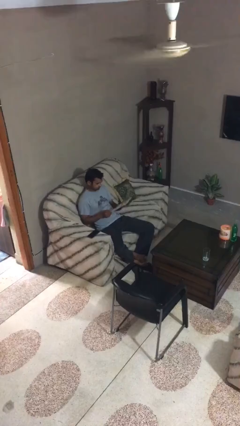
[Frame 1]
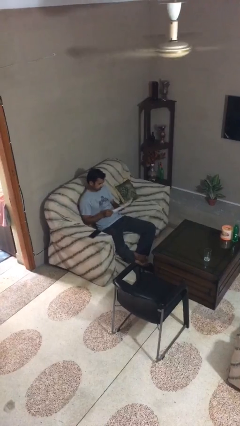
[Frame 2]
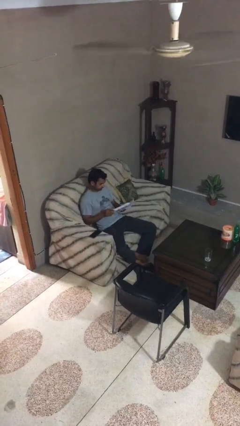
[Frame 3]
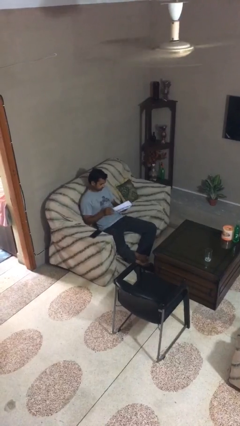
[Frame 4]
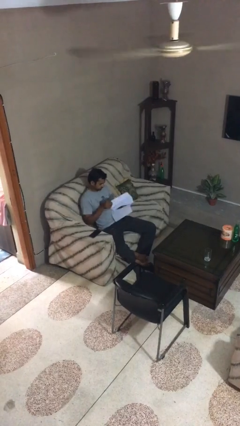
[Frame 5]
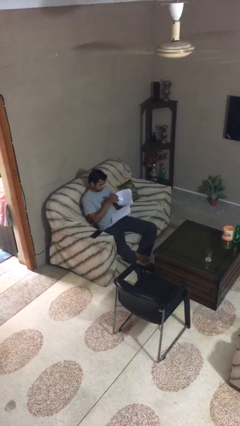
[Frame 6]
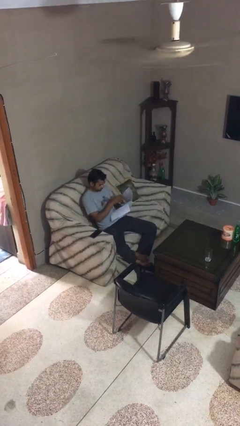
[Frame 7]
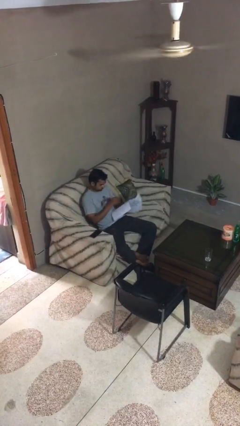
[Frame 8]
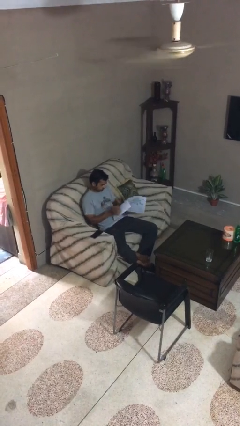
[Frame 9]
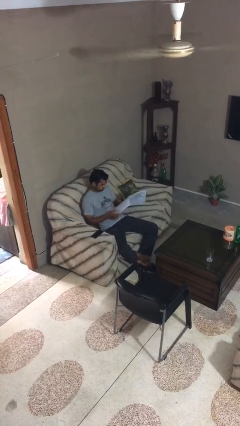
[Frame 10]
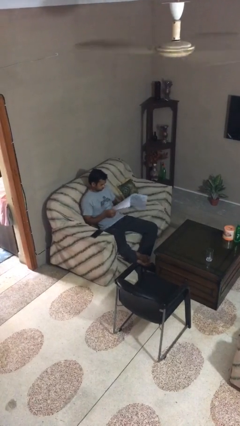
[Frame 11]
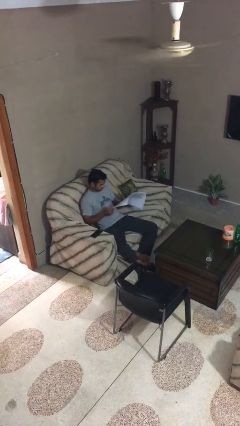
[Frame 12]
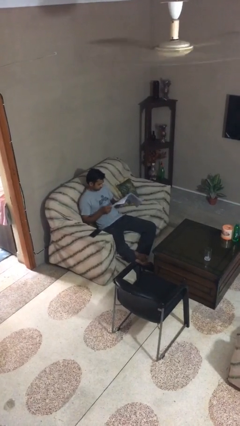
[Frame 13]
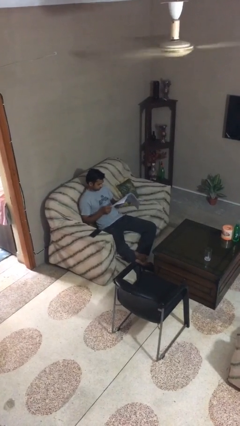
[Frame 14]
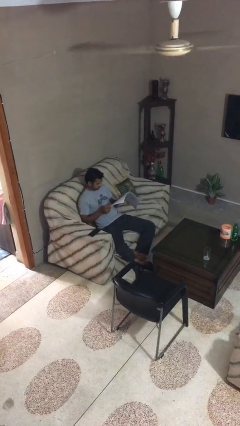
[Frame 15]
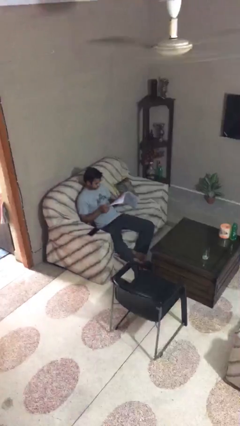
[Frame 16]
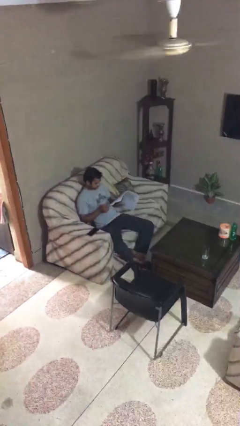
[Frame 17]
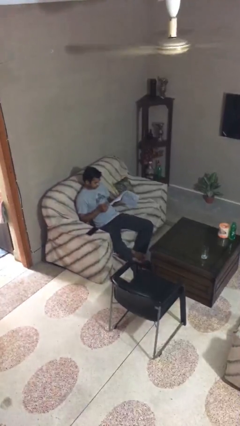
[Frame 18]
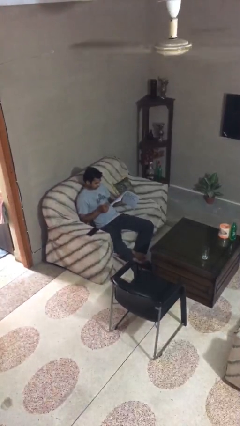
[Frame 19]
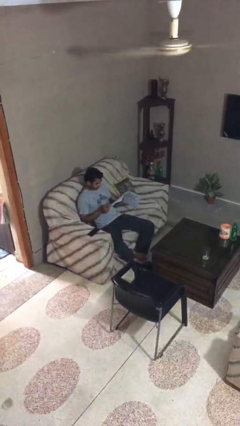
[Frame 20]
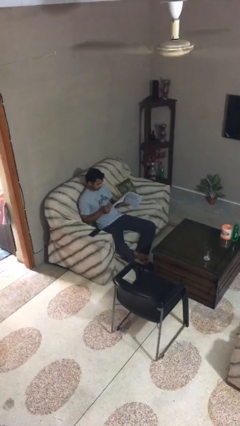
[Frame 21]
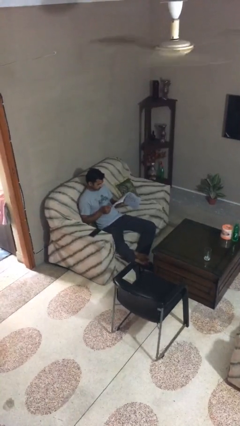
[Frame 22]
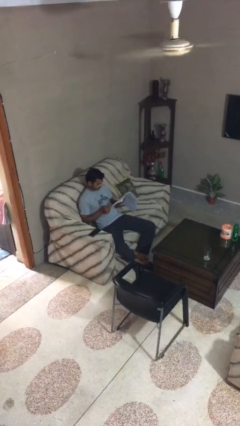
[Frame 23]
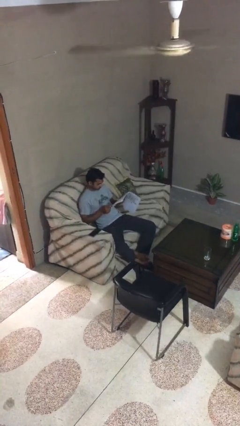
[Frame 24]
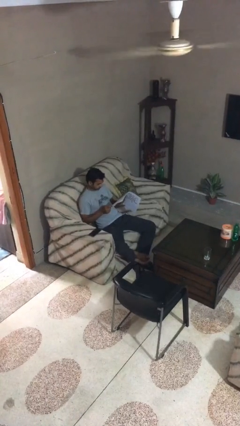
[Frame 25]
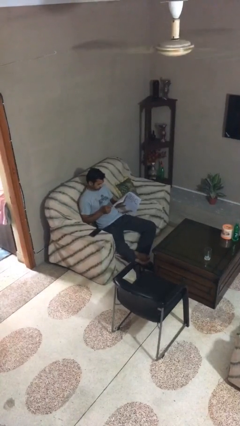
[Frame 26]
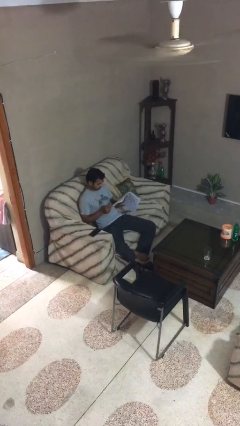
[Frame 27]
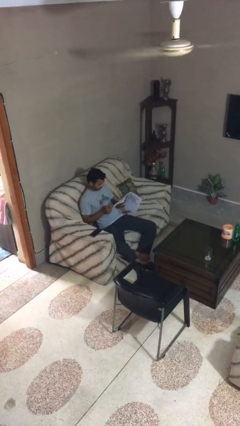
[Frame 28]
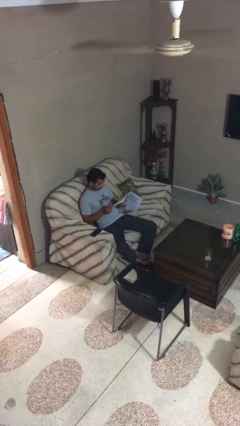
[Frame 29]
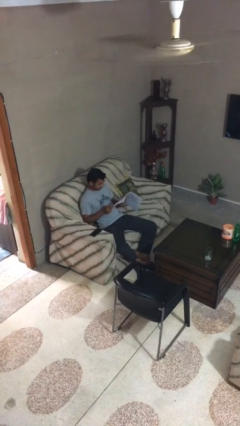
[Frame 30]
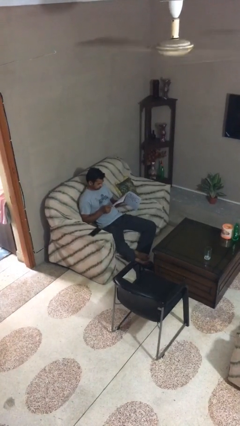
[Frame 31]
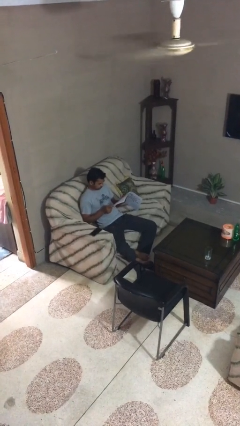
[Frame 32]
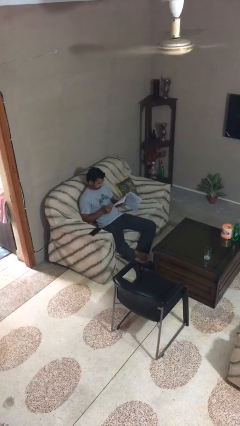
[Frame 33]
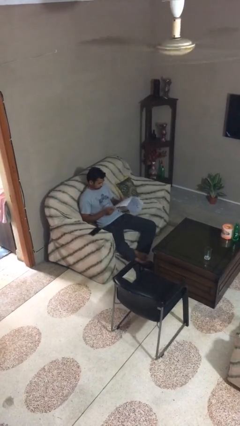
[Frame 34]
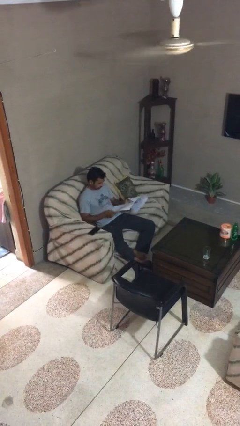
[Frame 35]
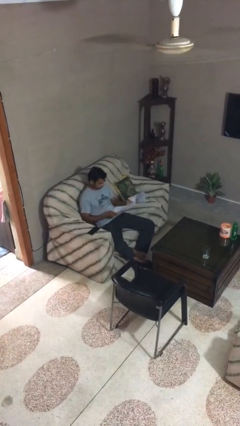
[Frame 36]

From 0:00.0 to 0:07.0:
person reads document

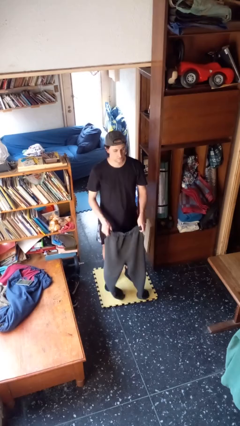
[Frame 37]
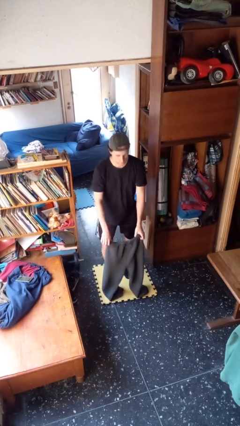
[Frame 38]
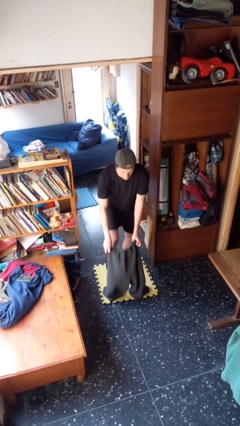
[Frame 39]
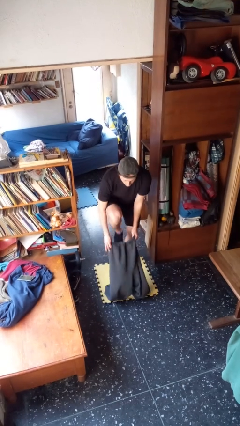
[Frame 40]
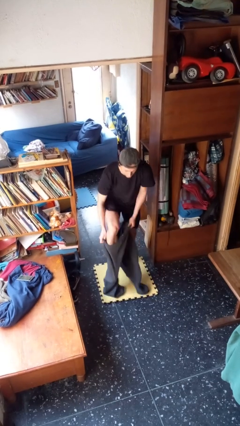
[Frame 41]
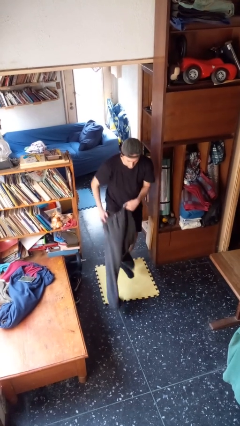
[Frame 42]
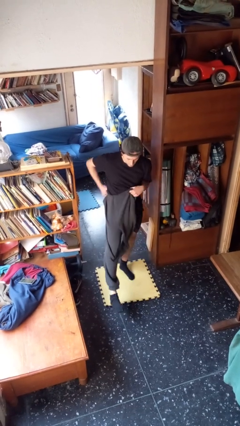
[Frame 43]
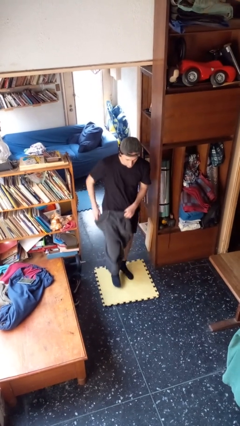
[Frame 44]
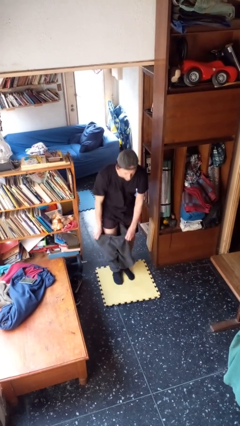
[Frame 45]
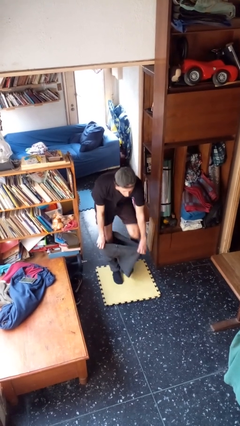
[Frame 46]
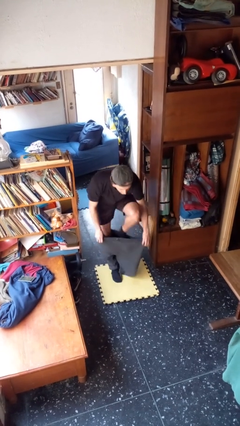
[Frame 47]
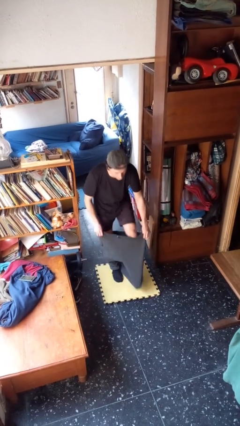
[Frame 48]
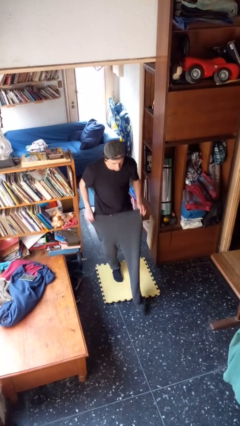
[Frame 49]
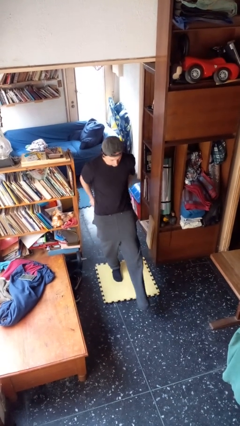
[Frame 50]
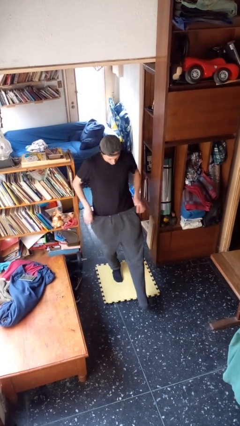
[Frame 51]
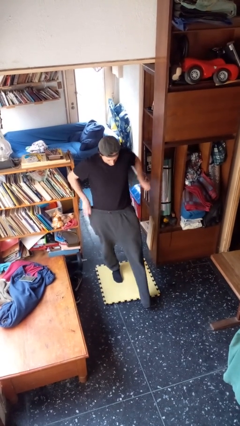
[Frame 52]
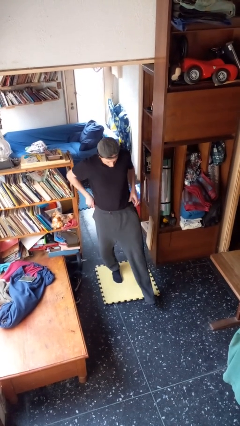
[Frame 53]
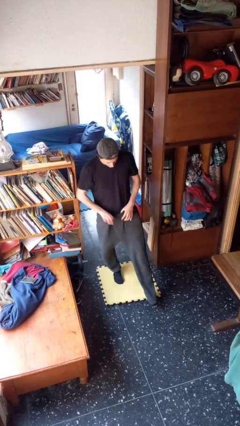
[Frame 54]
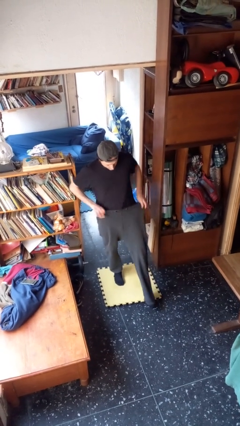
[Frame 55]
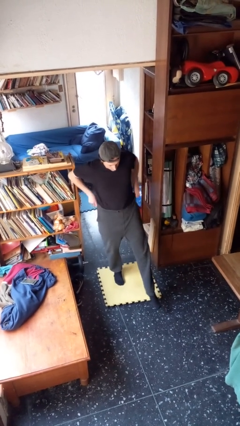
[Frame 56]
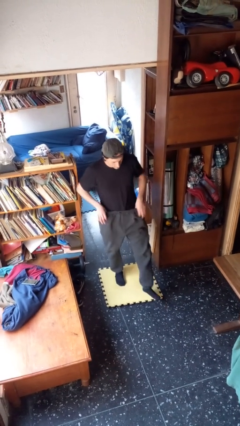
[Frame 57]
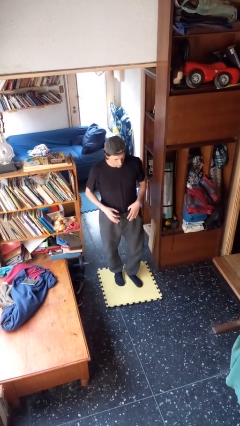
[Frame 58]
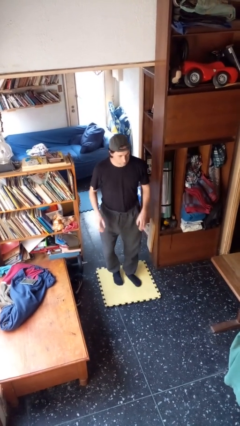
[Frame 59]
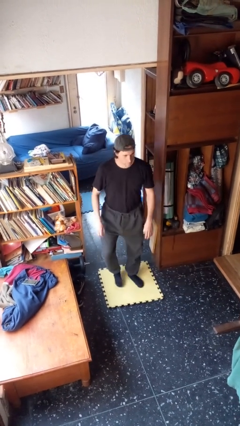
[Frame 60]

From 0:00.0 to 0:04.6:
person puts on pants

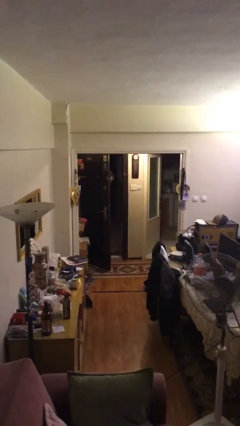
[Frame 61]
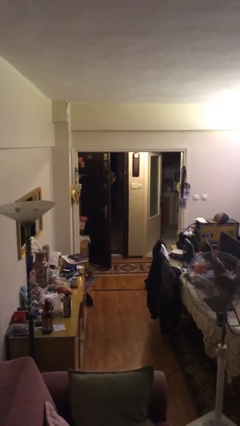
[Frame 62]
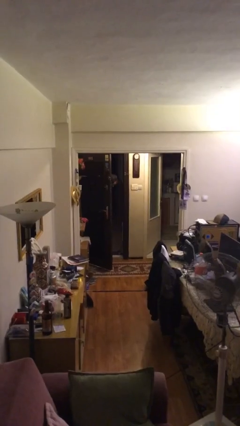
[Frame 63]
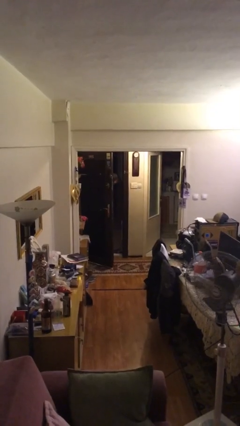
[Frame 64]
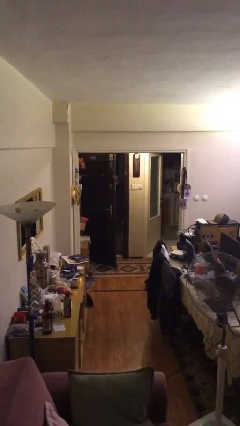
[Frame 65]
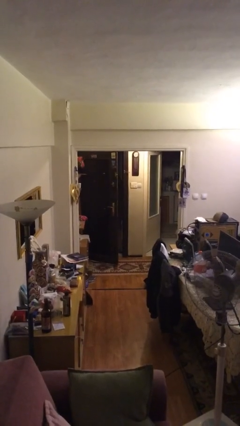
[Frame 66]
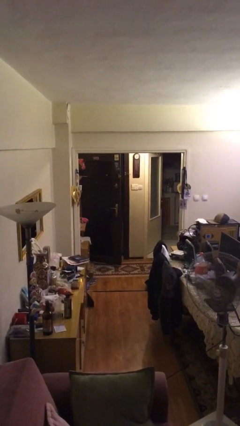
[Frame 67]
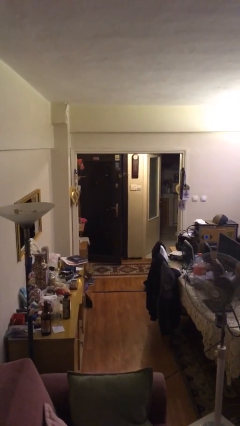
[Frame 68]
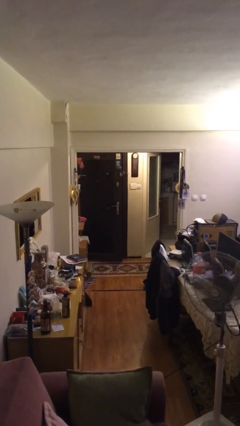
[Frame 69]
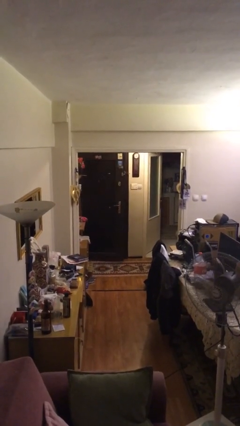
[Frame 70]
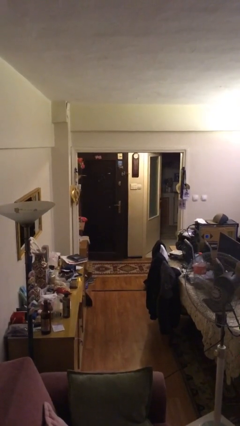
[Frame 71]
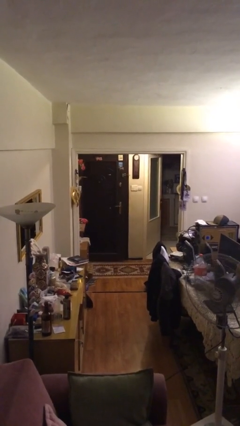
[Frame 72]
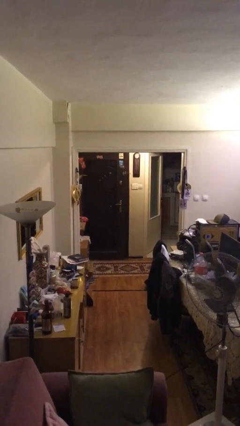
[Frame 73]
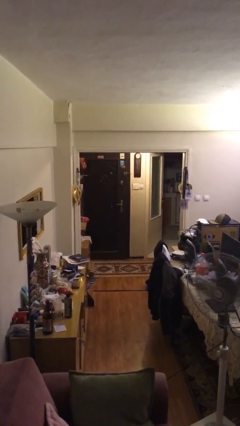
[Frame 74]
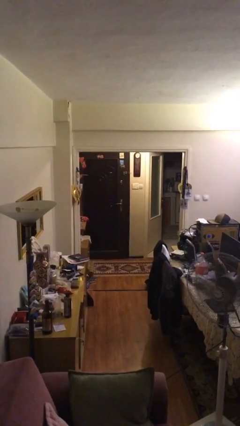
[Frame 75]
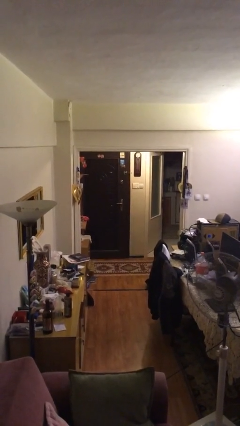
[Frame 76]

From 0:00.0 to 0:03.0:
person closes facility door

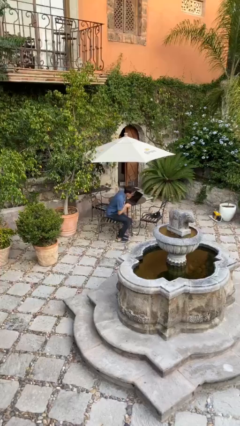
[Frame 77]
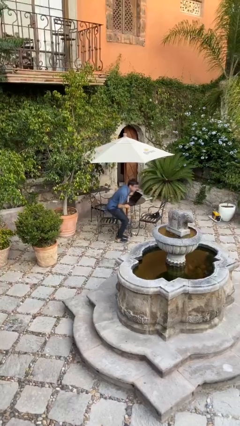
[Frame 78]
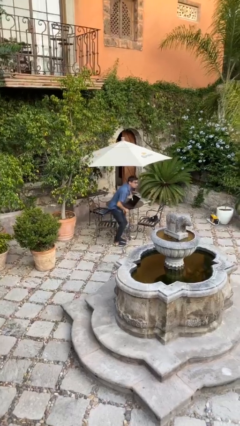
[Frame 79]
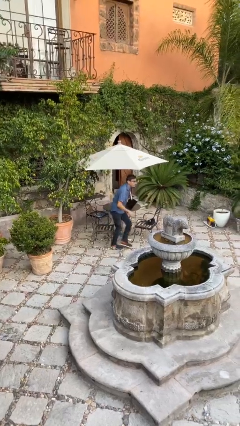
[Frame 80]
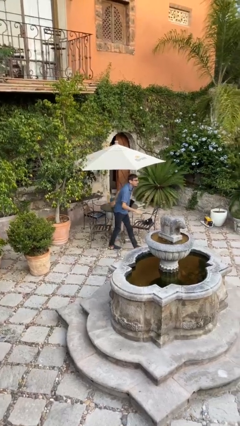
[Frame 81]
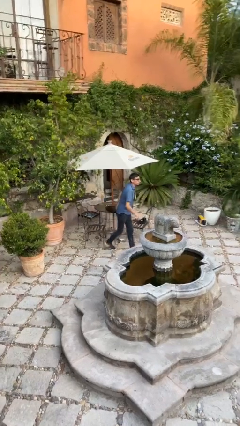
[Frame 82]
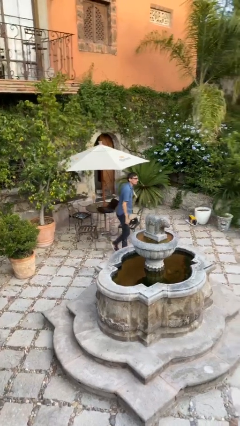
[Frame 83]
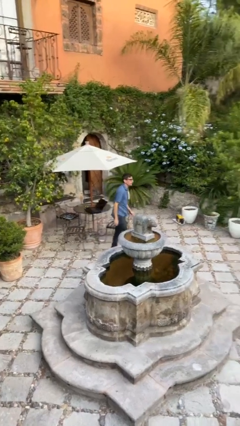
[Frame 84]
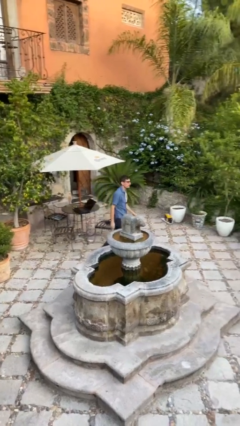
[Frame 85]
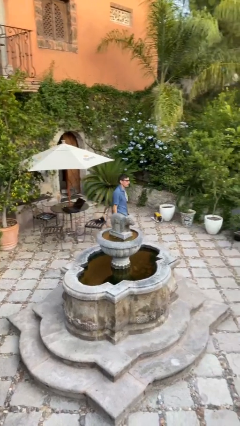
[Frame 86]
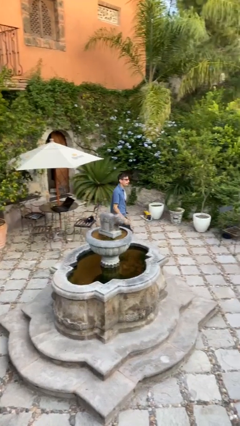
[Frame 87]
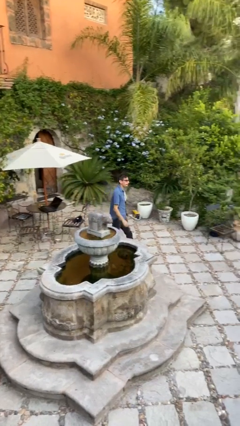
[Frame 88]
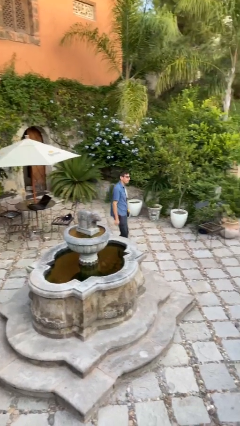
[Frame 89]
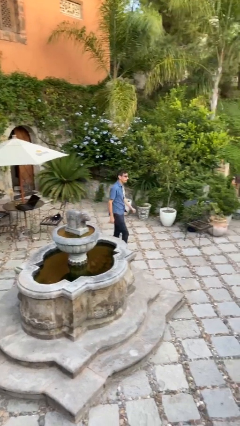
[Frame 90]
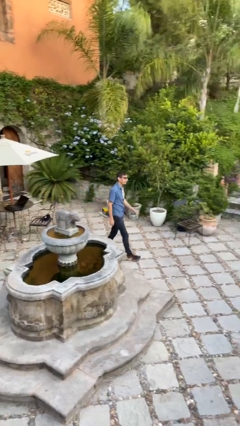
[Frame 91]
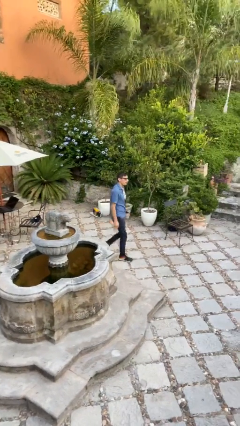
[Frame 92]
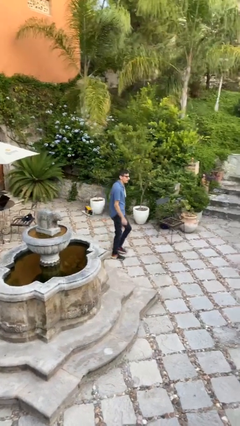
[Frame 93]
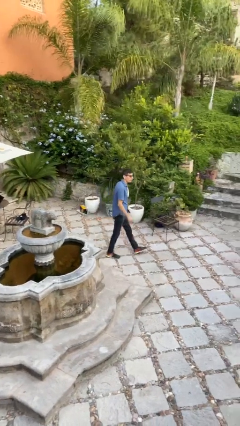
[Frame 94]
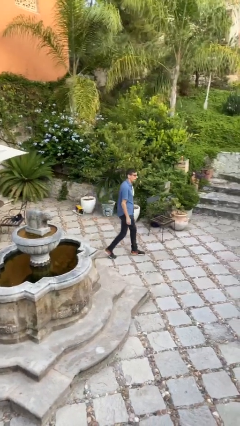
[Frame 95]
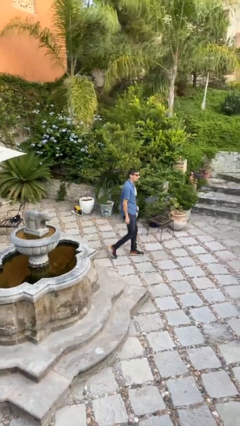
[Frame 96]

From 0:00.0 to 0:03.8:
person stands up
